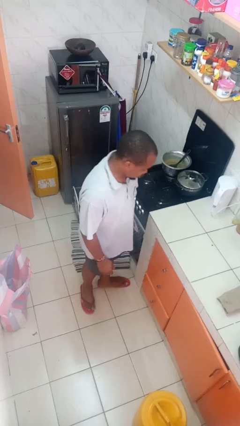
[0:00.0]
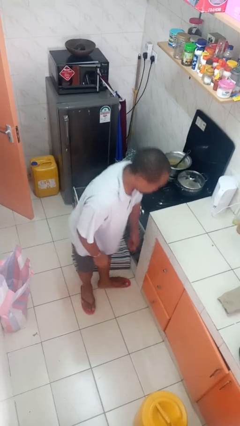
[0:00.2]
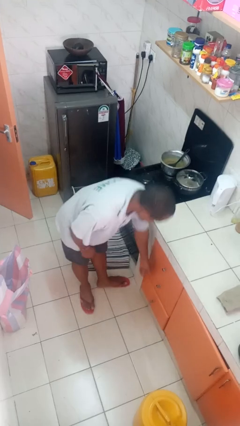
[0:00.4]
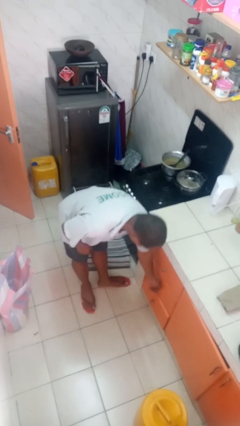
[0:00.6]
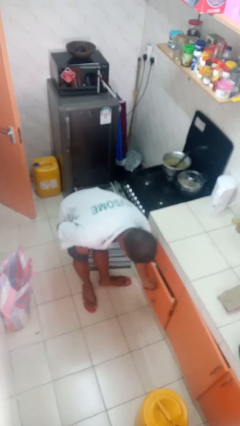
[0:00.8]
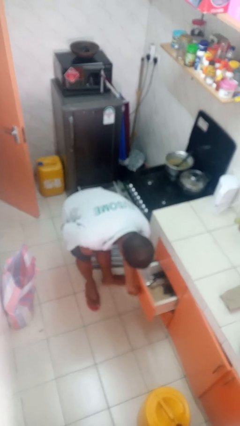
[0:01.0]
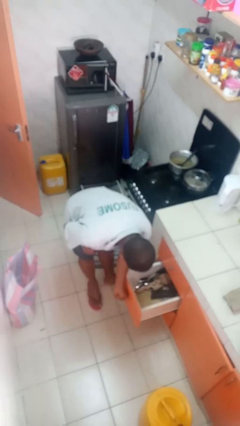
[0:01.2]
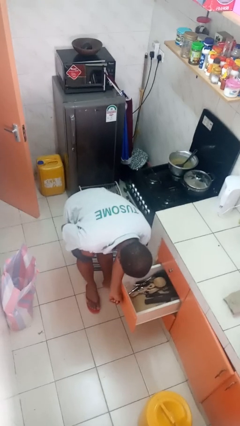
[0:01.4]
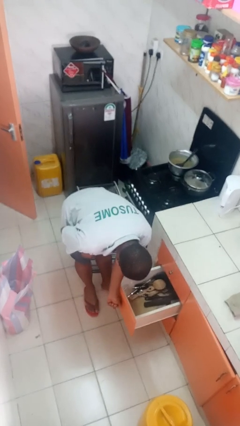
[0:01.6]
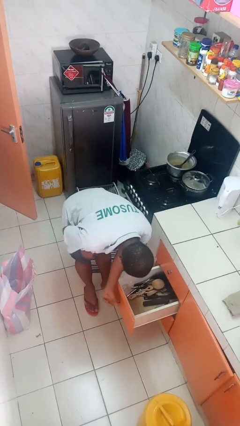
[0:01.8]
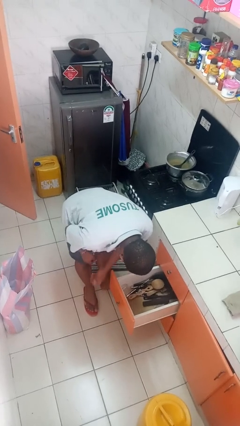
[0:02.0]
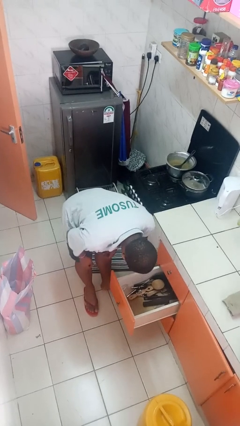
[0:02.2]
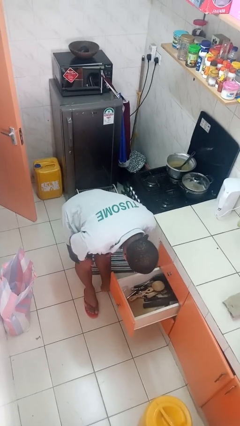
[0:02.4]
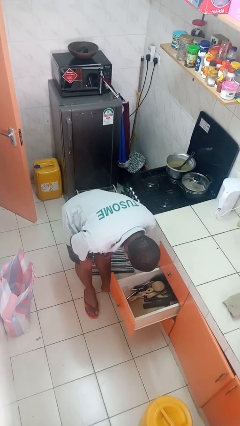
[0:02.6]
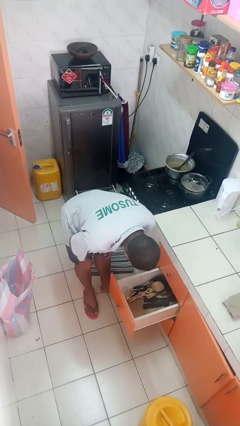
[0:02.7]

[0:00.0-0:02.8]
person opens kitchen drawer

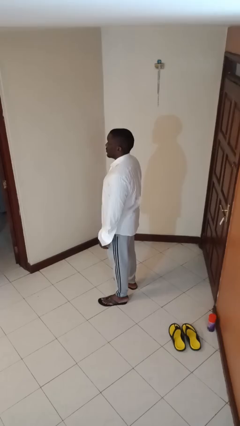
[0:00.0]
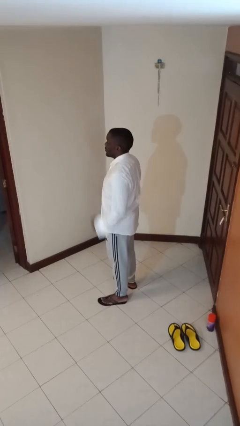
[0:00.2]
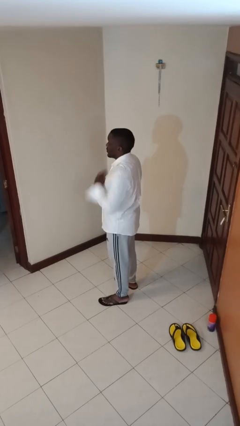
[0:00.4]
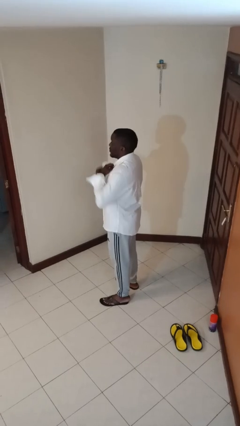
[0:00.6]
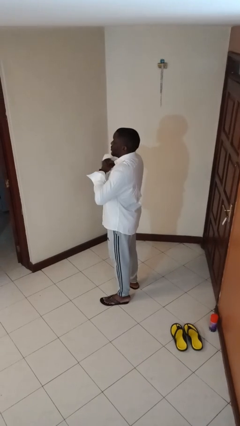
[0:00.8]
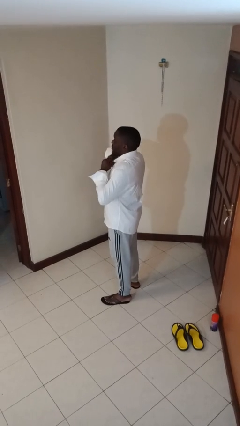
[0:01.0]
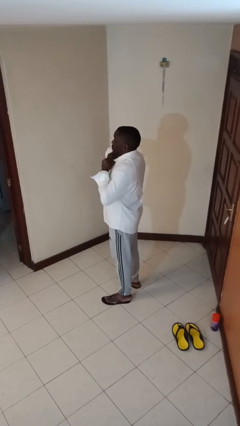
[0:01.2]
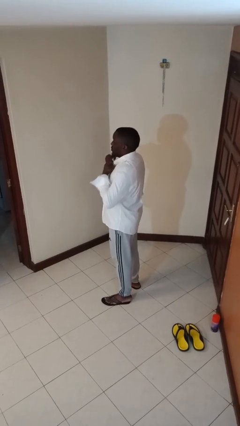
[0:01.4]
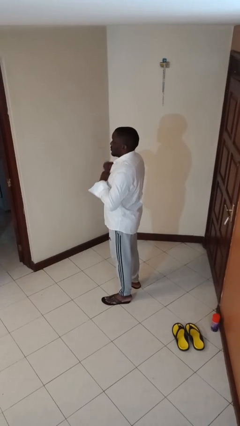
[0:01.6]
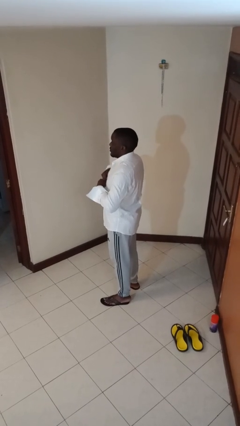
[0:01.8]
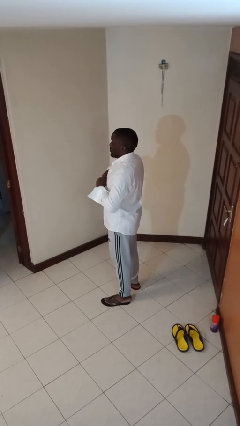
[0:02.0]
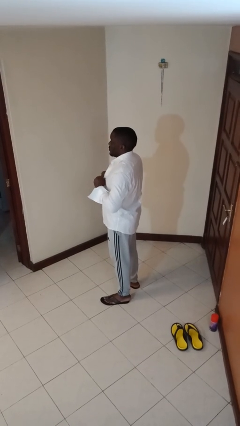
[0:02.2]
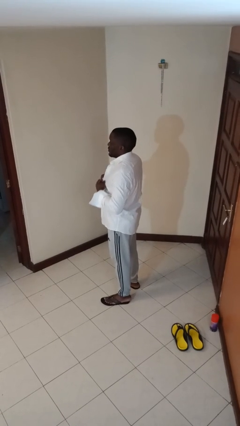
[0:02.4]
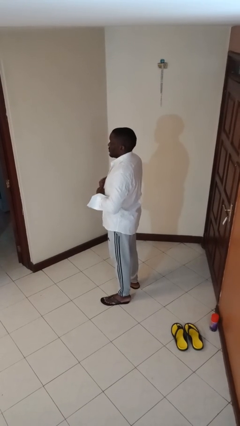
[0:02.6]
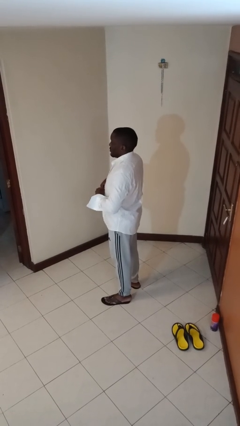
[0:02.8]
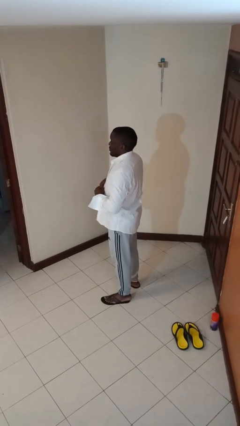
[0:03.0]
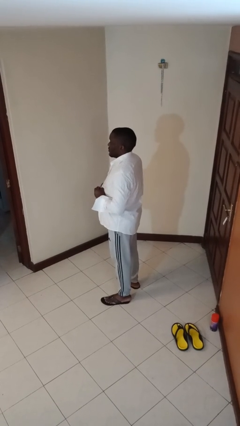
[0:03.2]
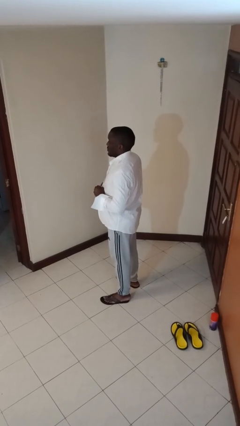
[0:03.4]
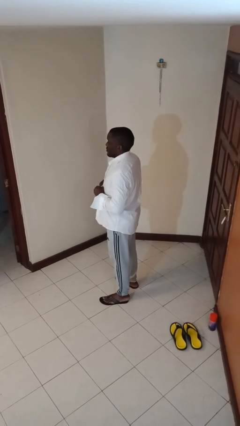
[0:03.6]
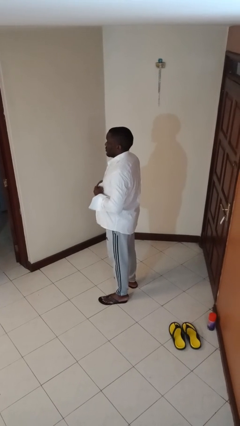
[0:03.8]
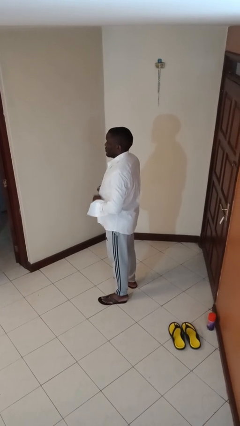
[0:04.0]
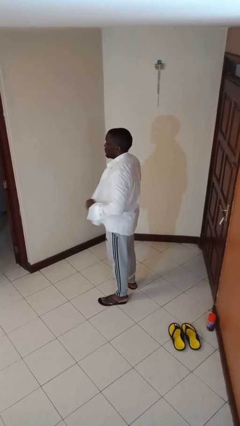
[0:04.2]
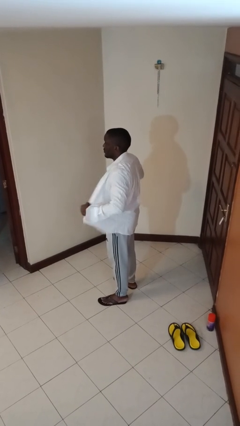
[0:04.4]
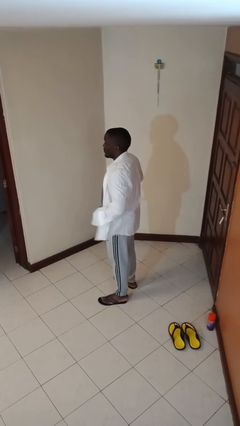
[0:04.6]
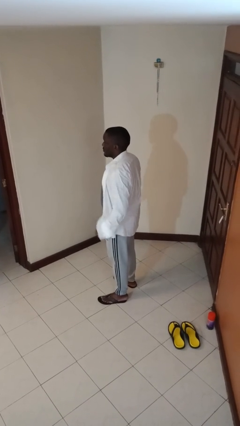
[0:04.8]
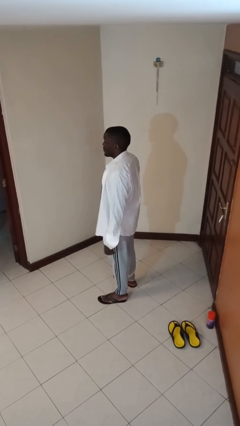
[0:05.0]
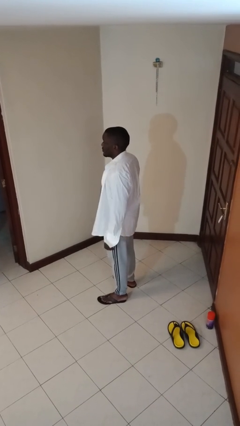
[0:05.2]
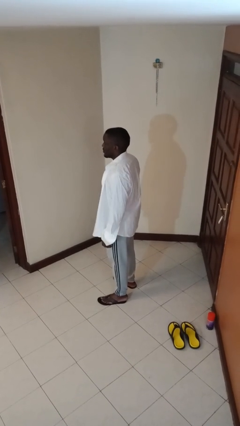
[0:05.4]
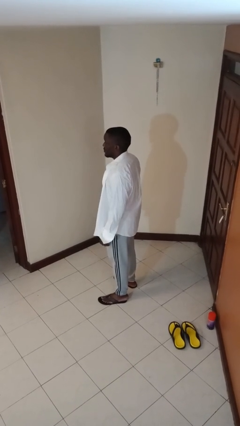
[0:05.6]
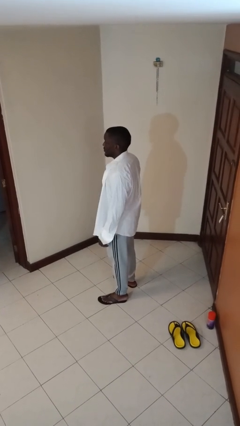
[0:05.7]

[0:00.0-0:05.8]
person unbuttons shirt

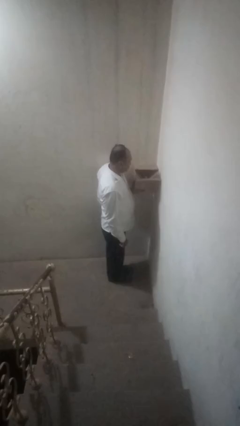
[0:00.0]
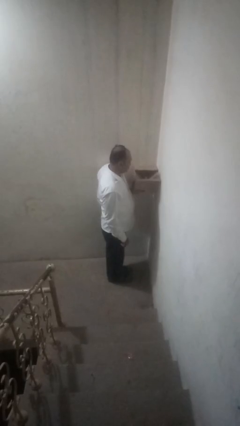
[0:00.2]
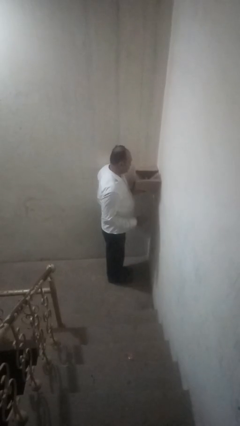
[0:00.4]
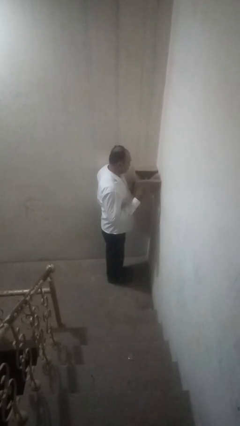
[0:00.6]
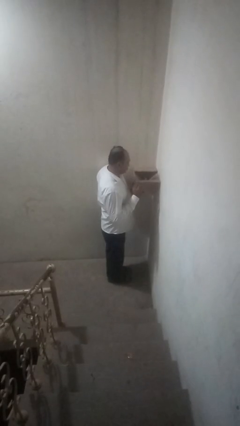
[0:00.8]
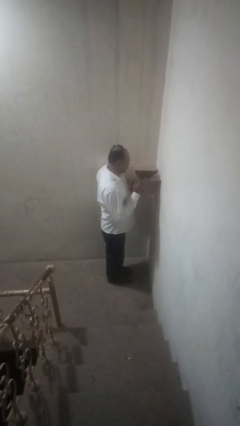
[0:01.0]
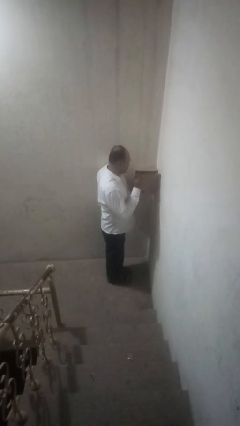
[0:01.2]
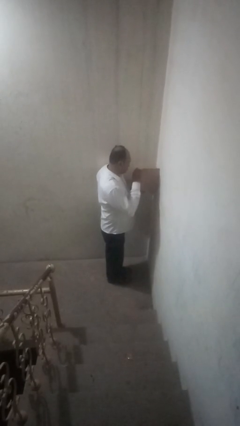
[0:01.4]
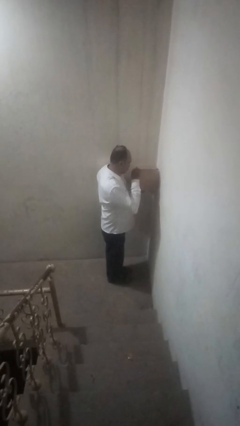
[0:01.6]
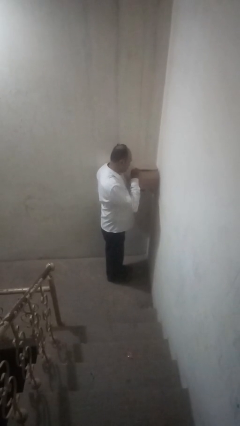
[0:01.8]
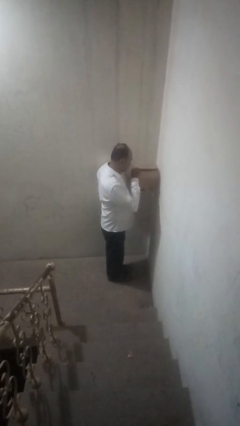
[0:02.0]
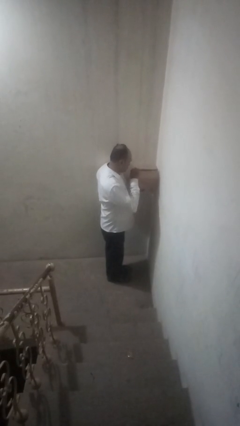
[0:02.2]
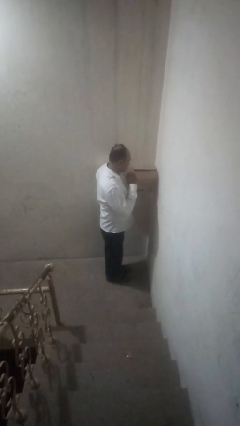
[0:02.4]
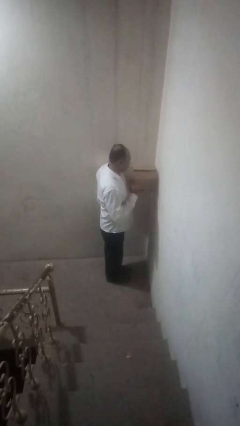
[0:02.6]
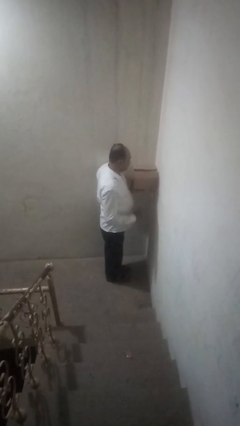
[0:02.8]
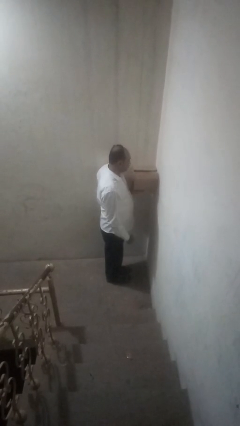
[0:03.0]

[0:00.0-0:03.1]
person closes mailbox

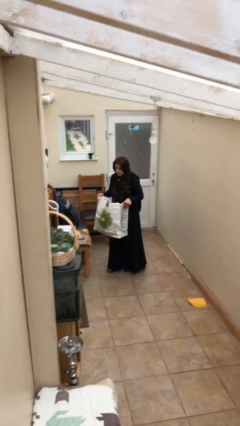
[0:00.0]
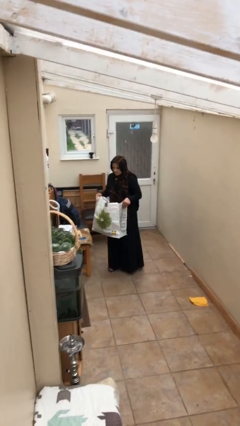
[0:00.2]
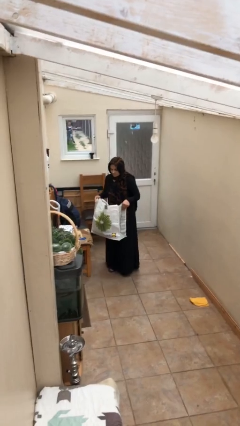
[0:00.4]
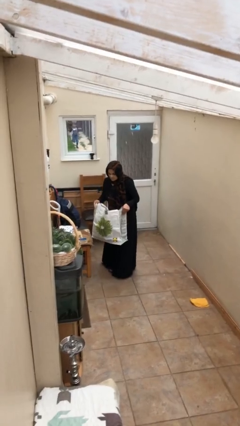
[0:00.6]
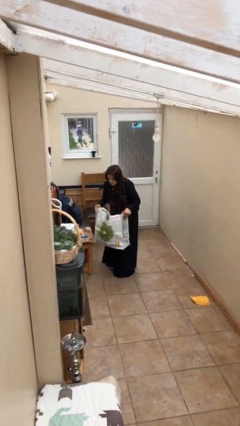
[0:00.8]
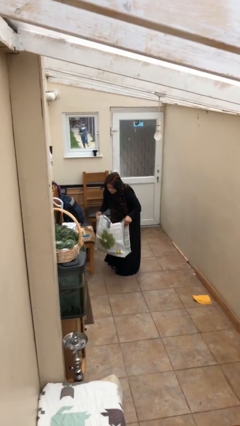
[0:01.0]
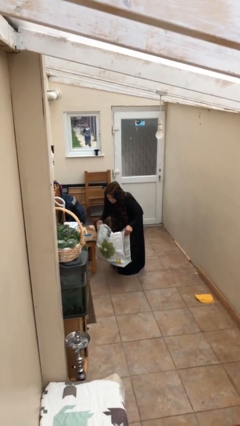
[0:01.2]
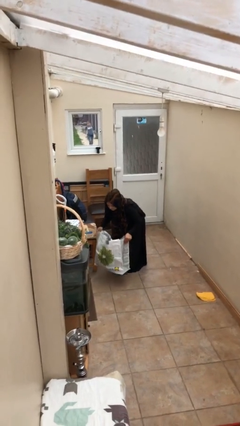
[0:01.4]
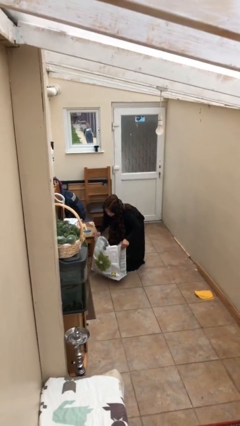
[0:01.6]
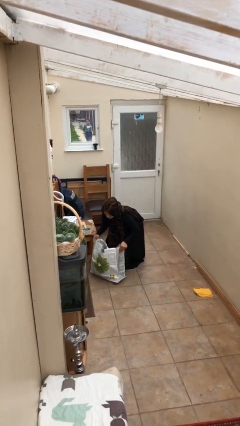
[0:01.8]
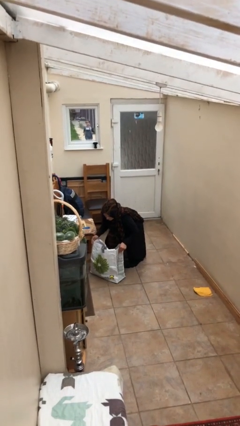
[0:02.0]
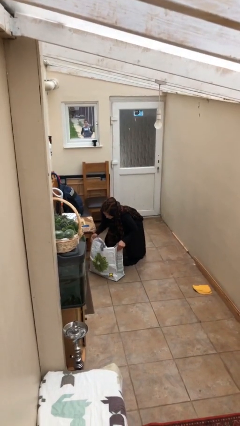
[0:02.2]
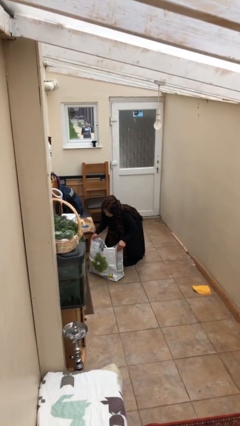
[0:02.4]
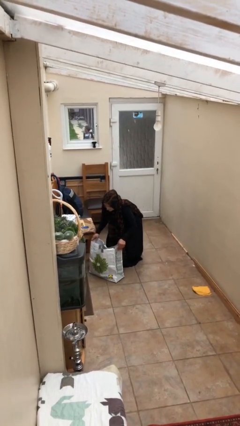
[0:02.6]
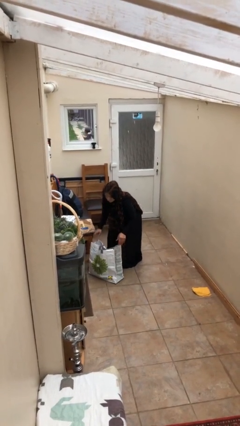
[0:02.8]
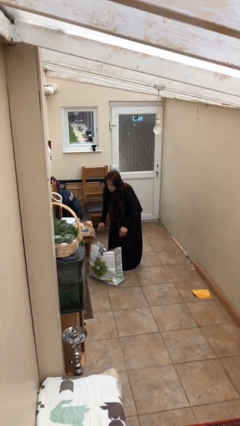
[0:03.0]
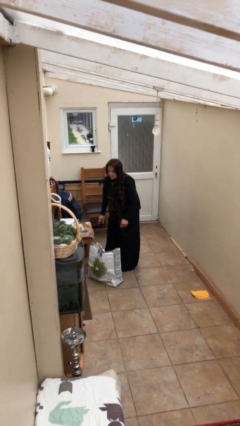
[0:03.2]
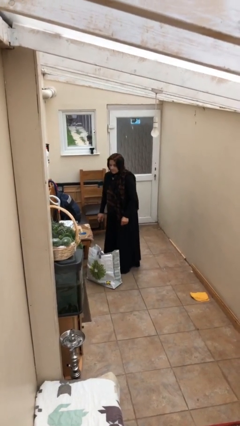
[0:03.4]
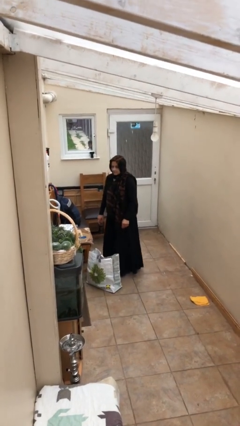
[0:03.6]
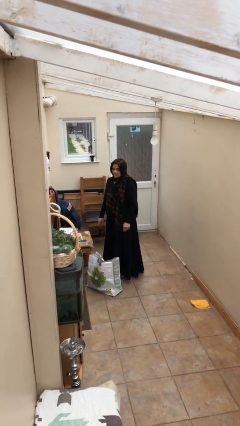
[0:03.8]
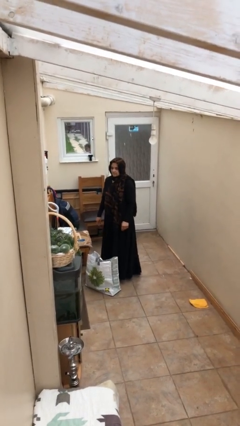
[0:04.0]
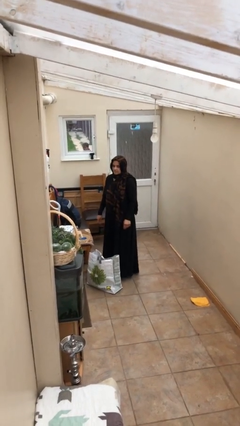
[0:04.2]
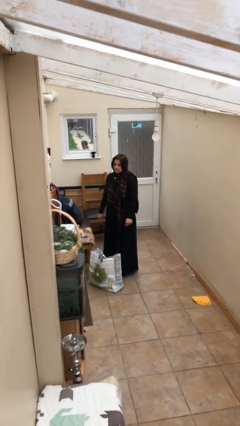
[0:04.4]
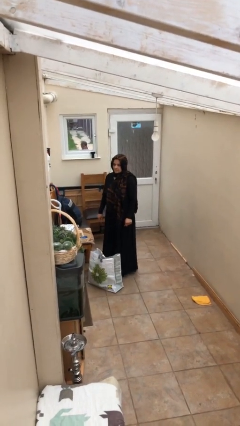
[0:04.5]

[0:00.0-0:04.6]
person puts down object on floor

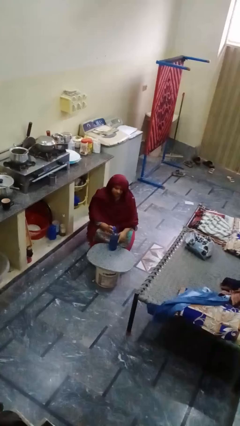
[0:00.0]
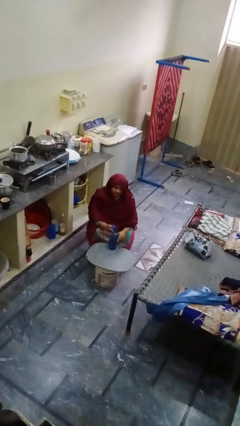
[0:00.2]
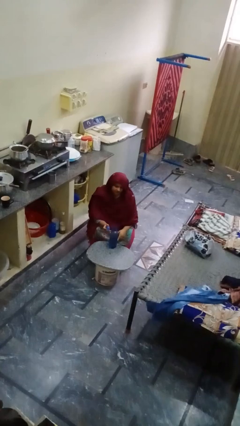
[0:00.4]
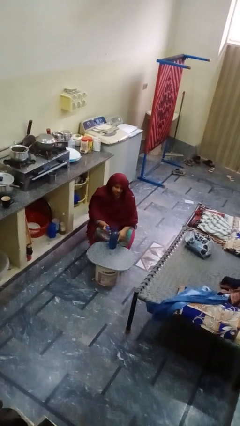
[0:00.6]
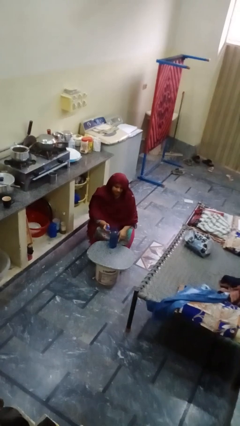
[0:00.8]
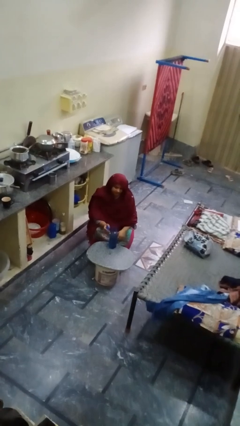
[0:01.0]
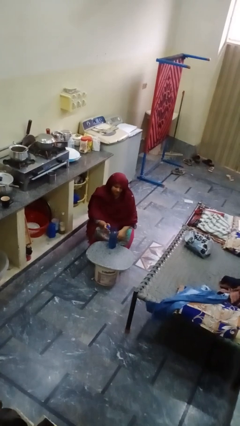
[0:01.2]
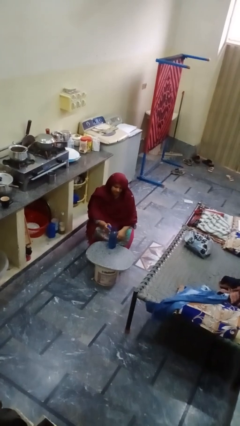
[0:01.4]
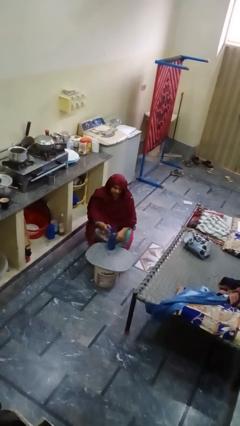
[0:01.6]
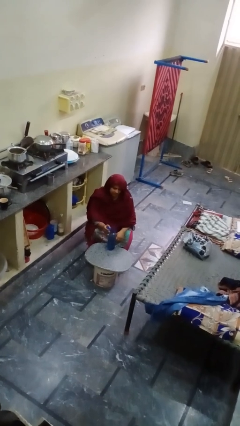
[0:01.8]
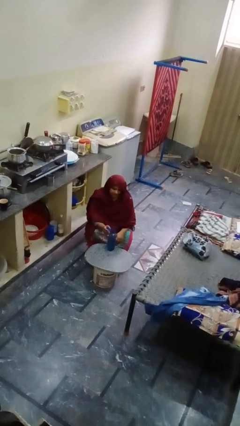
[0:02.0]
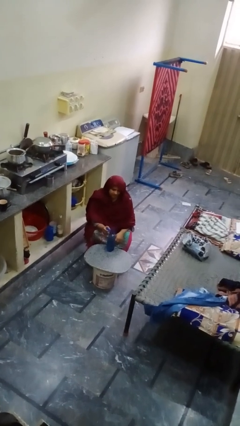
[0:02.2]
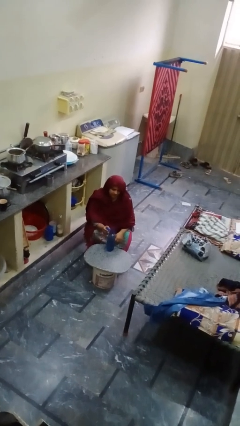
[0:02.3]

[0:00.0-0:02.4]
person unscrews lid from bottle
